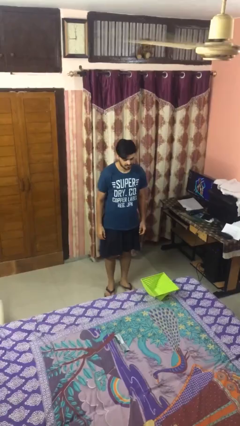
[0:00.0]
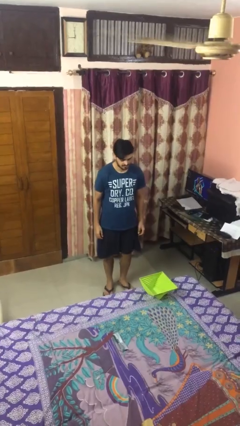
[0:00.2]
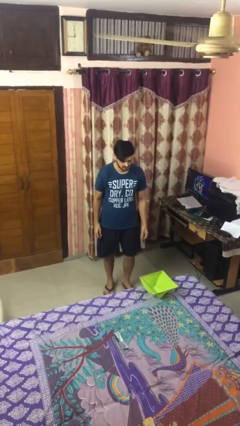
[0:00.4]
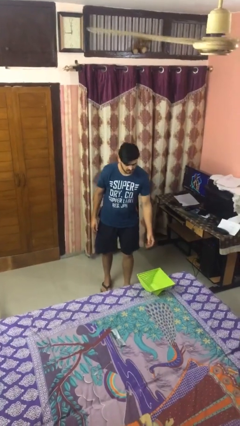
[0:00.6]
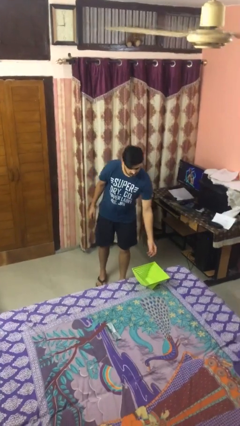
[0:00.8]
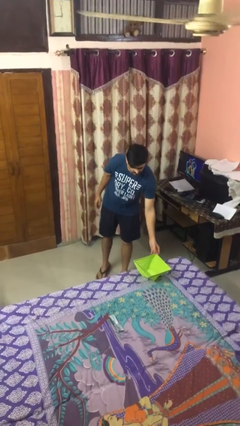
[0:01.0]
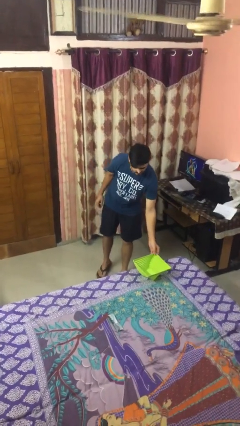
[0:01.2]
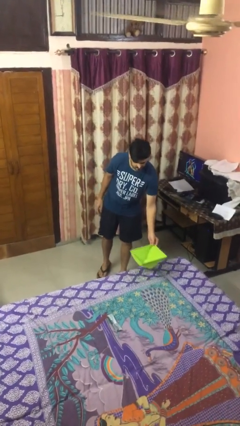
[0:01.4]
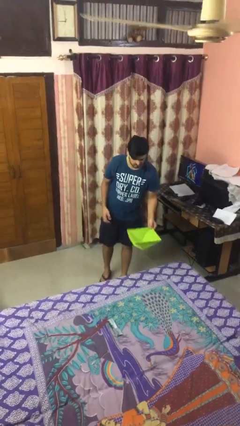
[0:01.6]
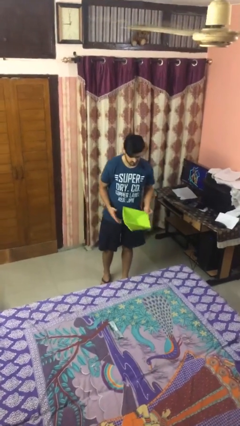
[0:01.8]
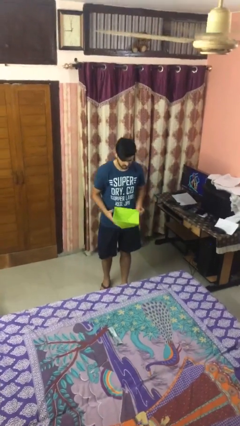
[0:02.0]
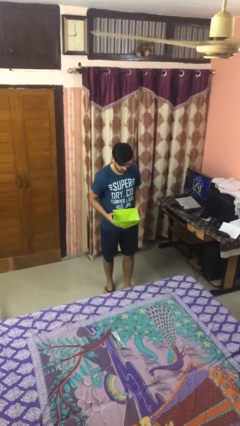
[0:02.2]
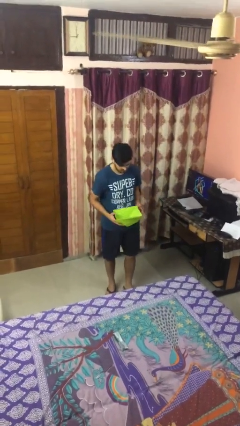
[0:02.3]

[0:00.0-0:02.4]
person picks up object from bed

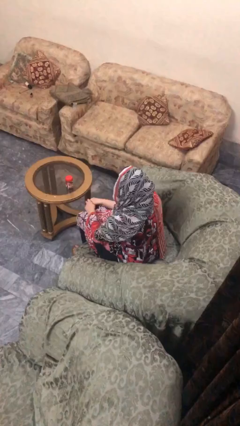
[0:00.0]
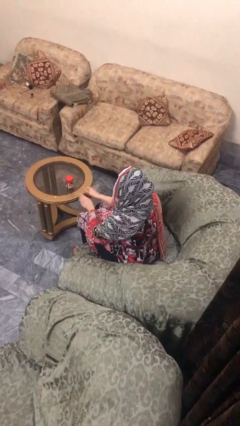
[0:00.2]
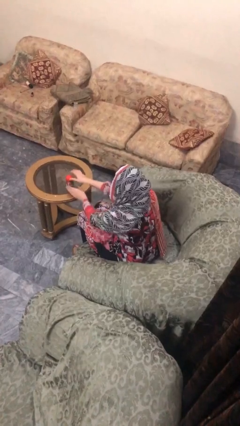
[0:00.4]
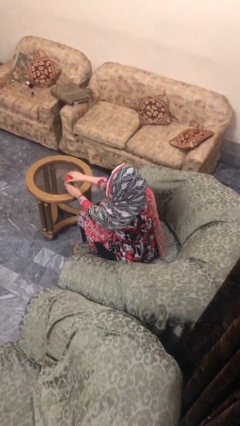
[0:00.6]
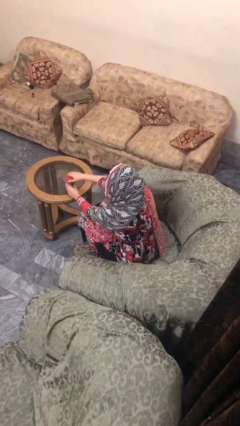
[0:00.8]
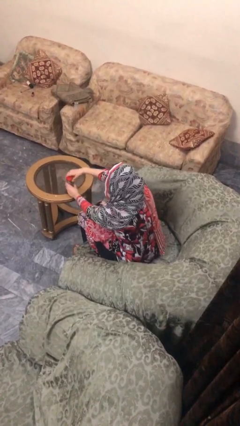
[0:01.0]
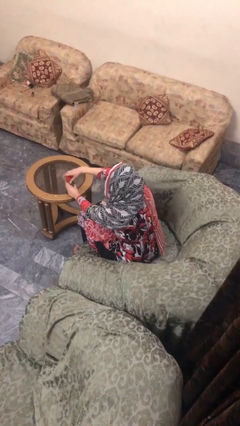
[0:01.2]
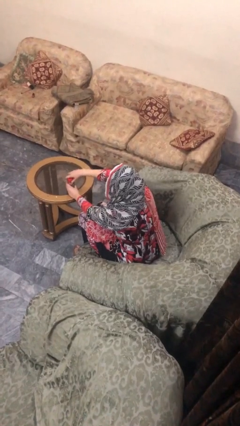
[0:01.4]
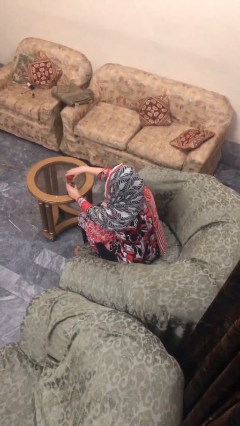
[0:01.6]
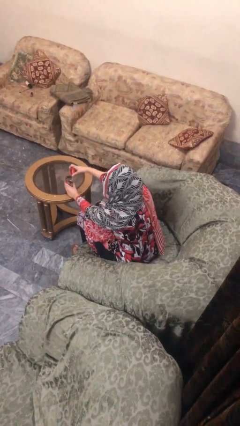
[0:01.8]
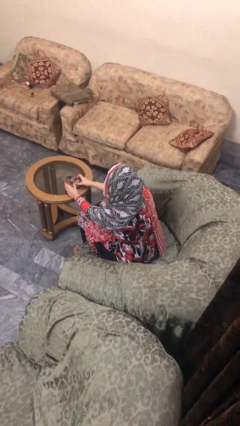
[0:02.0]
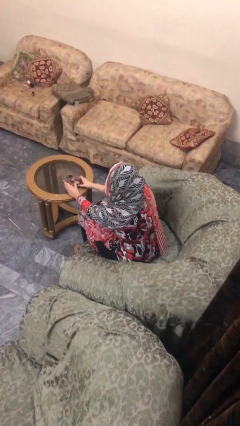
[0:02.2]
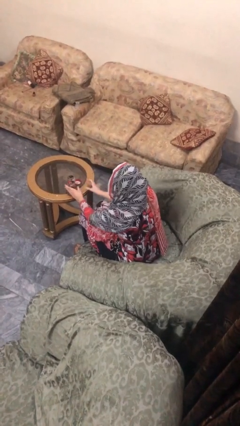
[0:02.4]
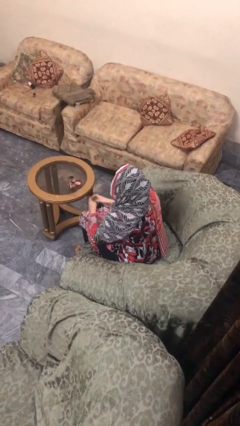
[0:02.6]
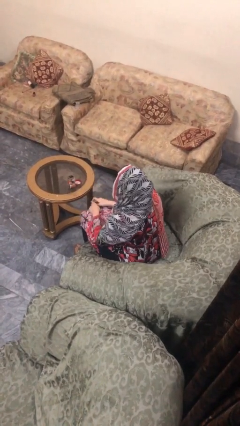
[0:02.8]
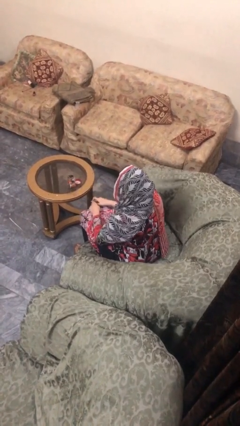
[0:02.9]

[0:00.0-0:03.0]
person opens jar

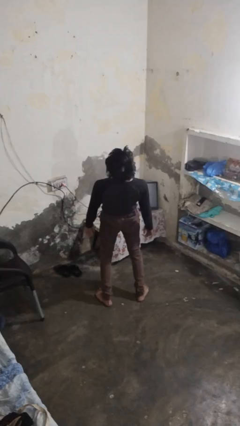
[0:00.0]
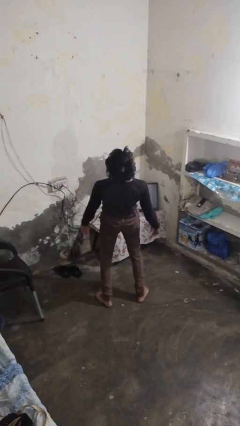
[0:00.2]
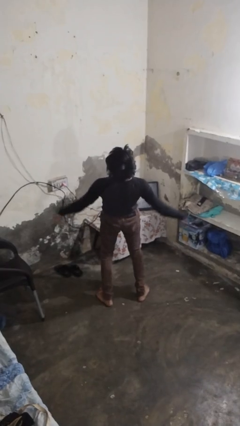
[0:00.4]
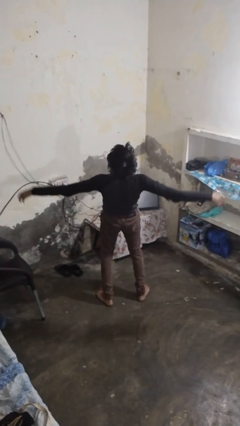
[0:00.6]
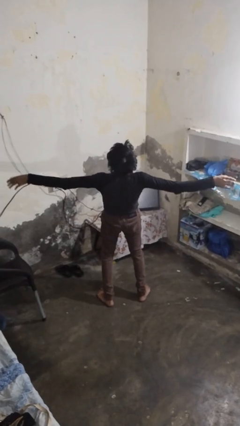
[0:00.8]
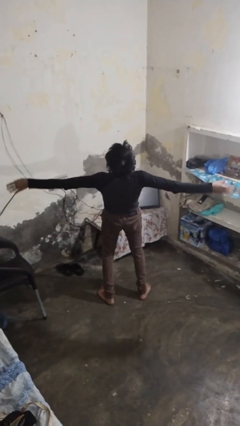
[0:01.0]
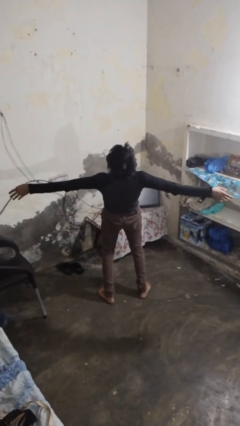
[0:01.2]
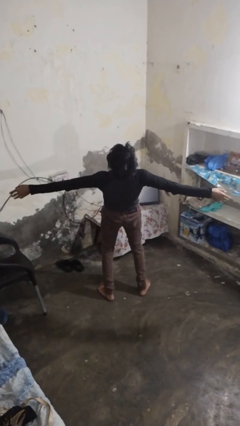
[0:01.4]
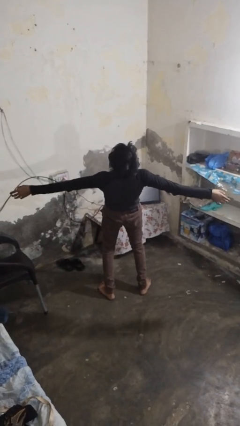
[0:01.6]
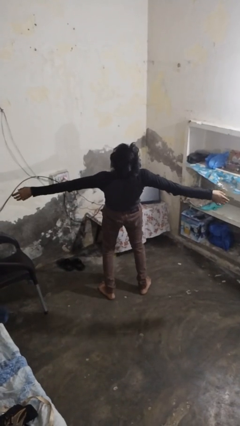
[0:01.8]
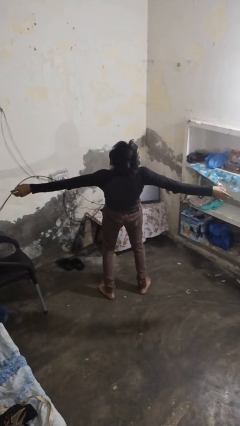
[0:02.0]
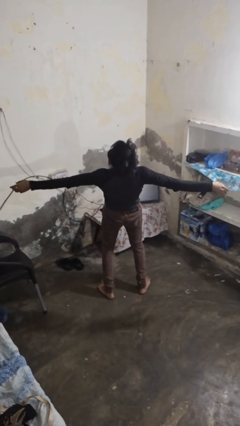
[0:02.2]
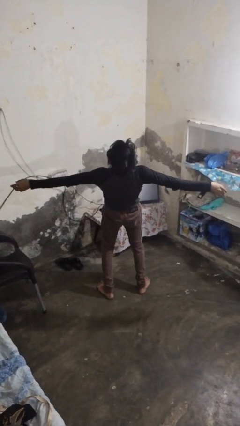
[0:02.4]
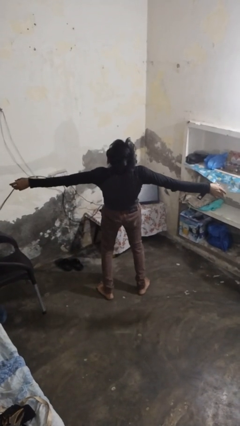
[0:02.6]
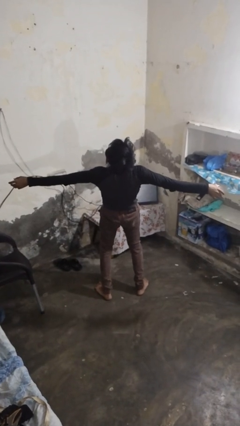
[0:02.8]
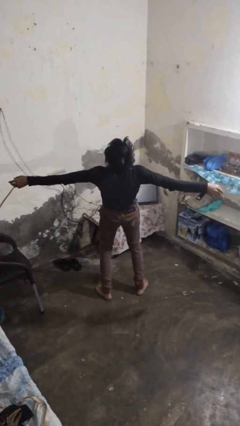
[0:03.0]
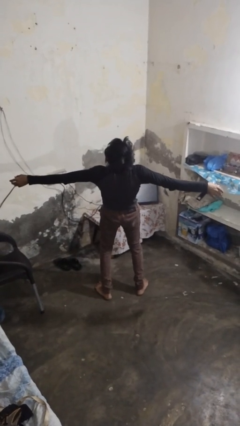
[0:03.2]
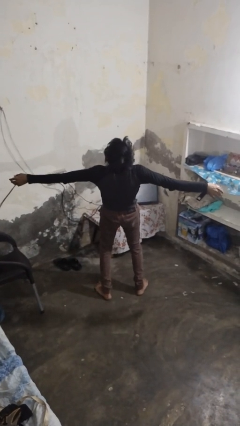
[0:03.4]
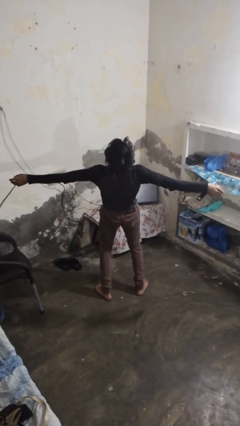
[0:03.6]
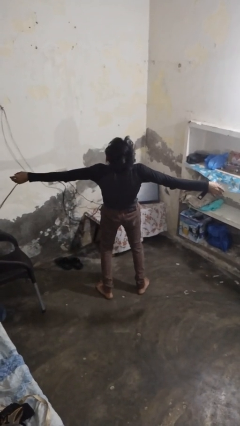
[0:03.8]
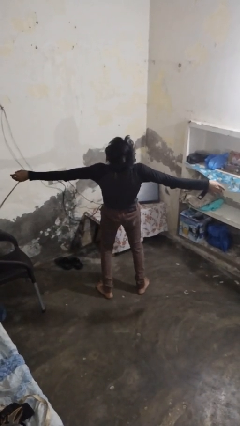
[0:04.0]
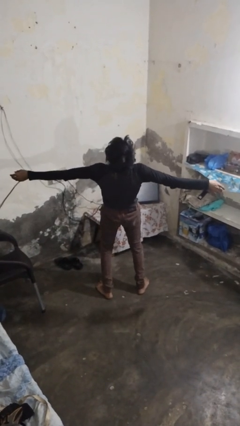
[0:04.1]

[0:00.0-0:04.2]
person stretches arms to side

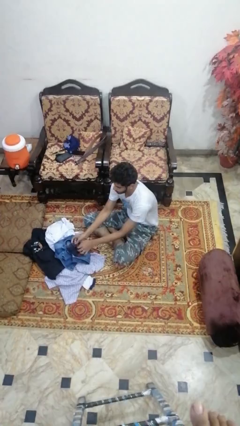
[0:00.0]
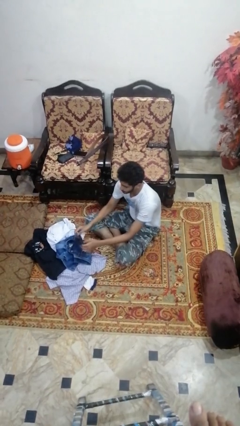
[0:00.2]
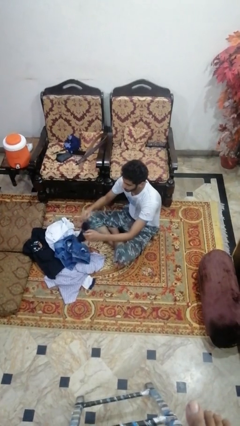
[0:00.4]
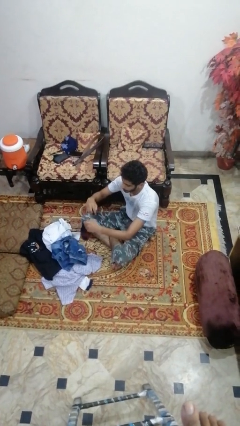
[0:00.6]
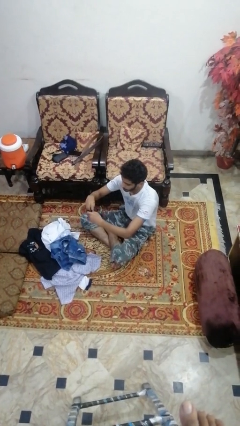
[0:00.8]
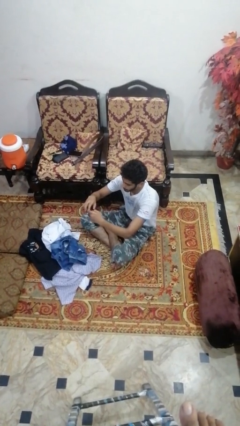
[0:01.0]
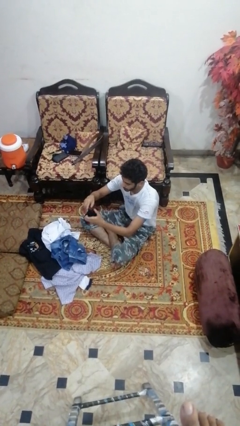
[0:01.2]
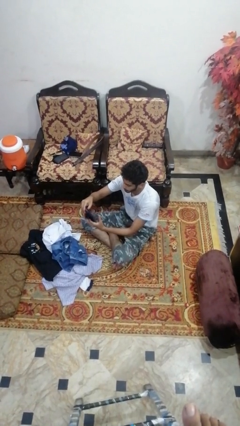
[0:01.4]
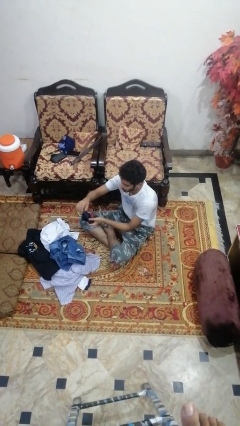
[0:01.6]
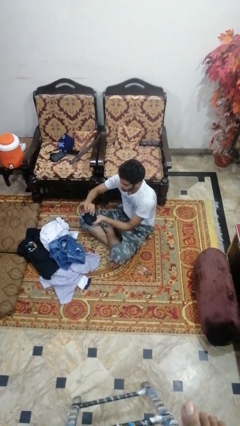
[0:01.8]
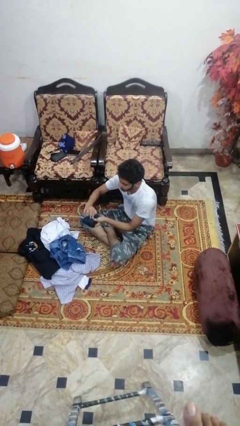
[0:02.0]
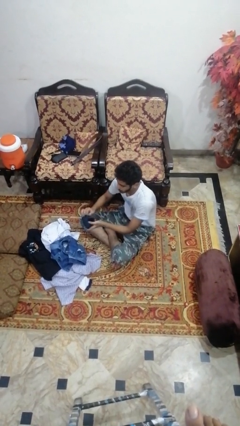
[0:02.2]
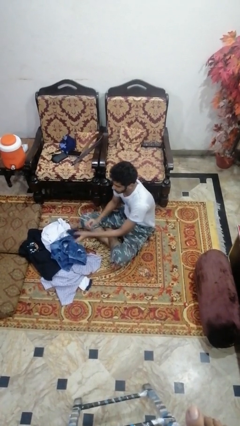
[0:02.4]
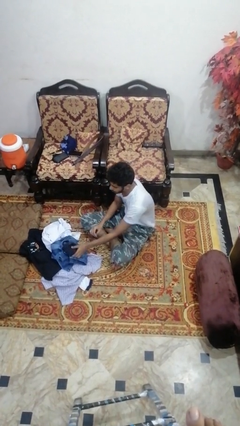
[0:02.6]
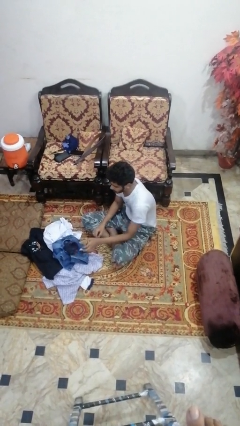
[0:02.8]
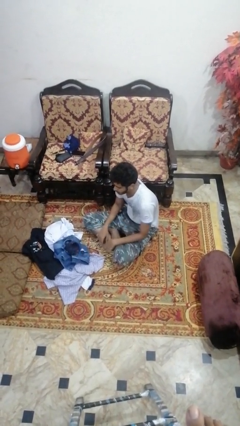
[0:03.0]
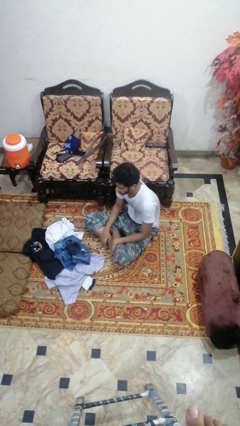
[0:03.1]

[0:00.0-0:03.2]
person folds socks

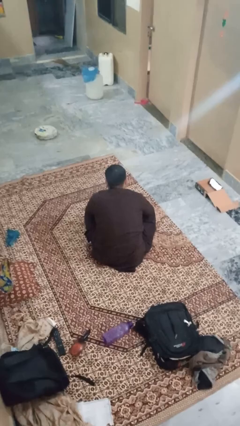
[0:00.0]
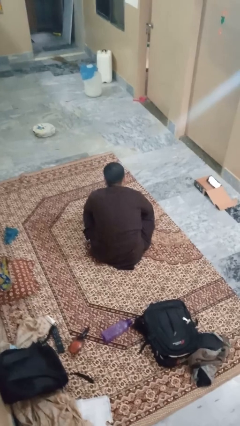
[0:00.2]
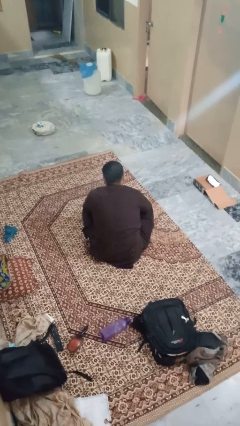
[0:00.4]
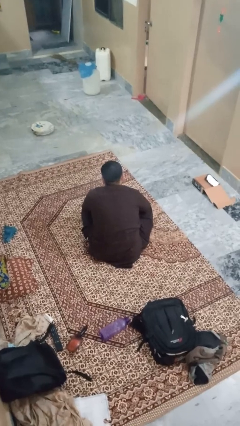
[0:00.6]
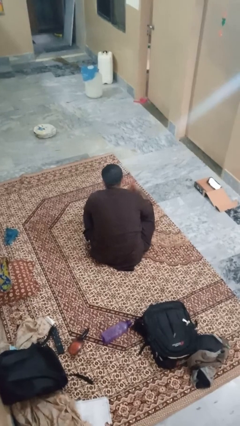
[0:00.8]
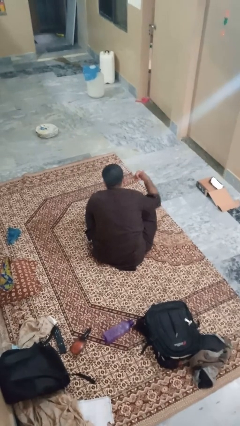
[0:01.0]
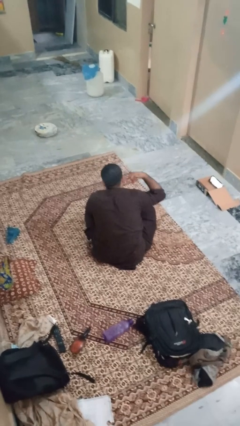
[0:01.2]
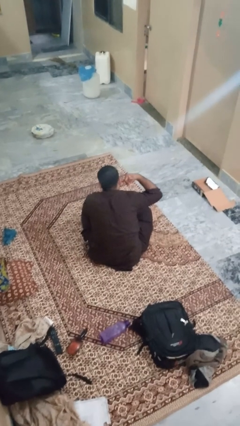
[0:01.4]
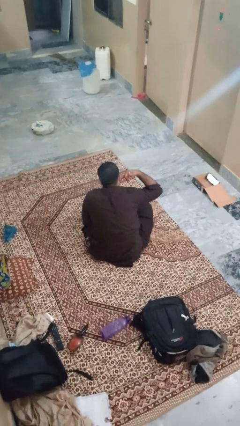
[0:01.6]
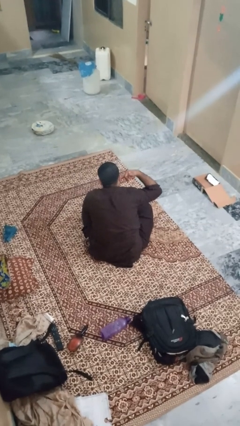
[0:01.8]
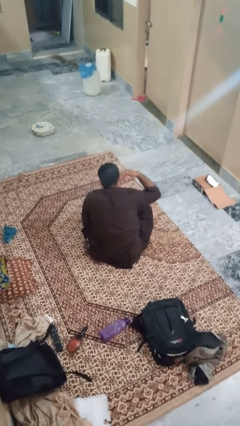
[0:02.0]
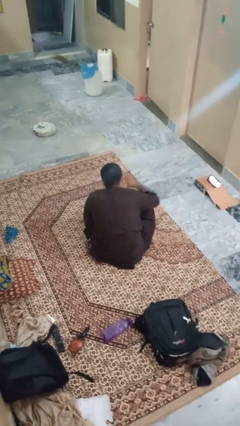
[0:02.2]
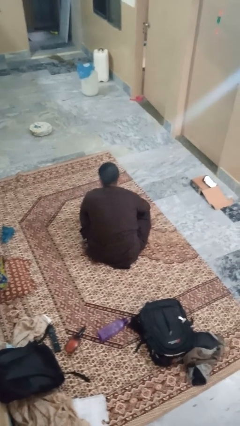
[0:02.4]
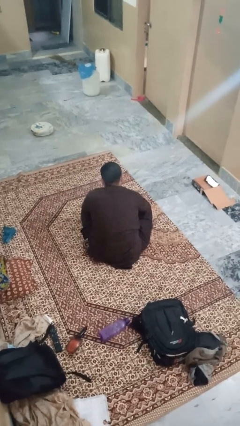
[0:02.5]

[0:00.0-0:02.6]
person gestures call me

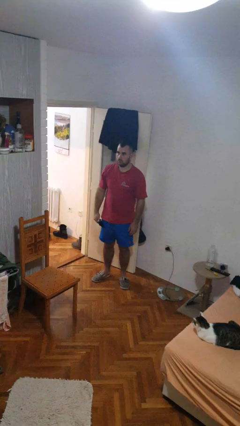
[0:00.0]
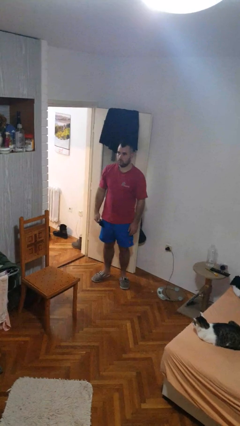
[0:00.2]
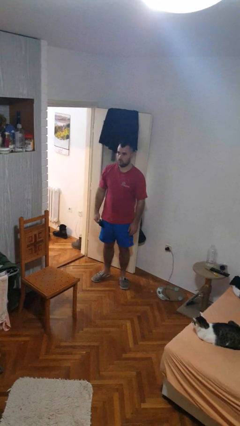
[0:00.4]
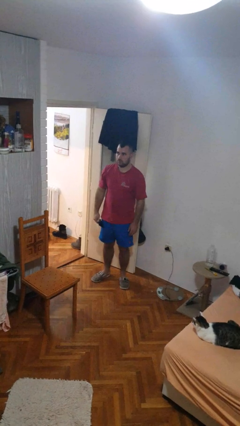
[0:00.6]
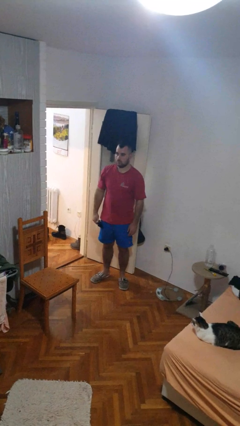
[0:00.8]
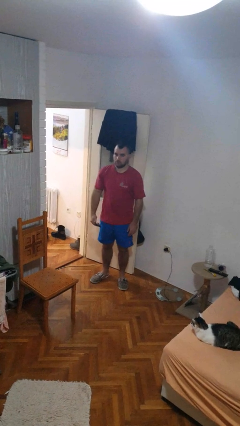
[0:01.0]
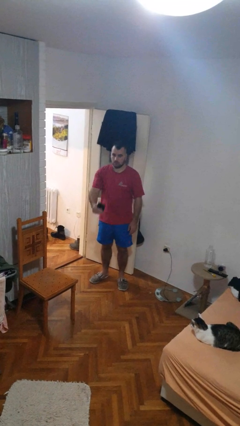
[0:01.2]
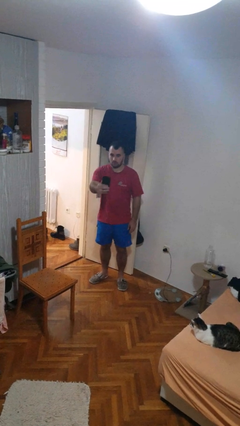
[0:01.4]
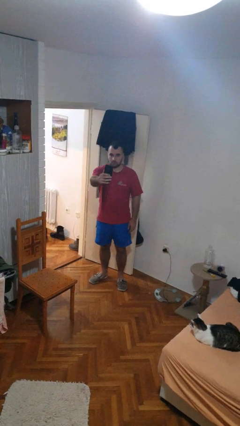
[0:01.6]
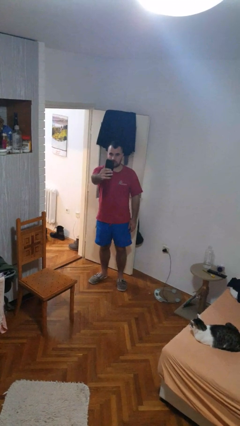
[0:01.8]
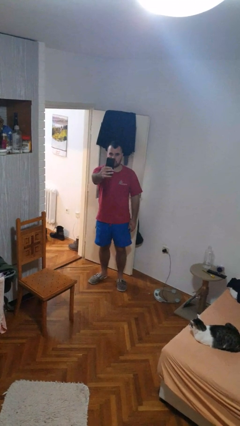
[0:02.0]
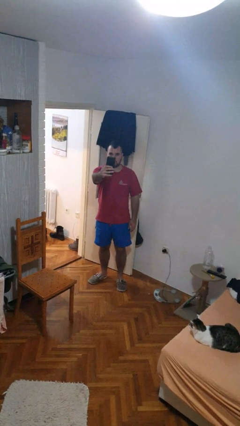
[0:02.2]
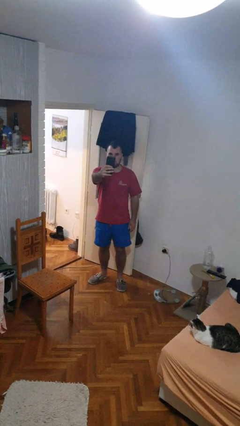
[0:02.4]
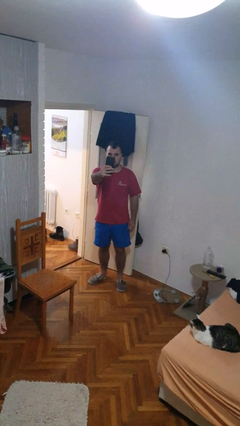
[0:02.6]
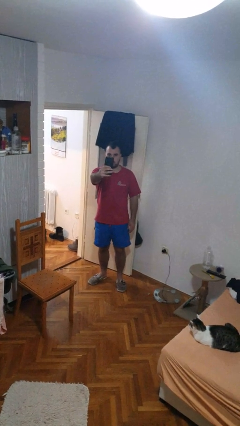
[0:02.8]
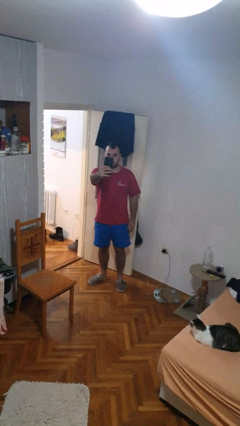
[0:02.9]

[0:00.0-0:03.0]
person takes selfie
